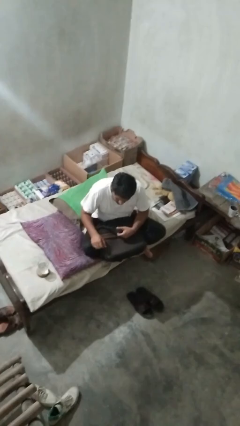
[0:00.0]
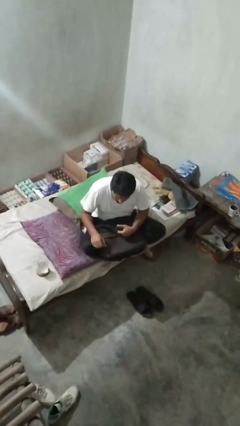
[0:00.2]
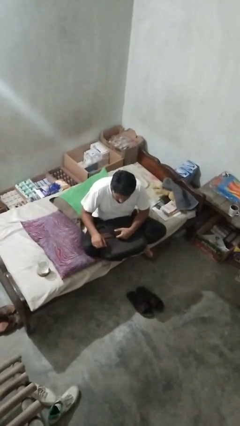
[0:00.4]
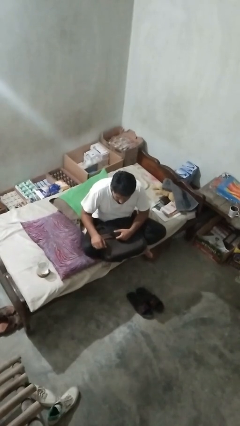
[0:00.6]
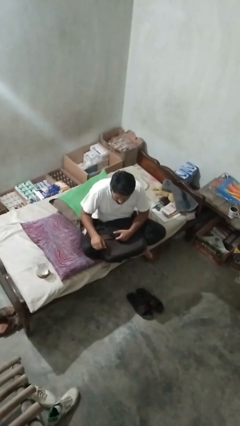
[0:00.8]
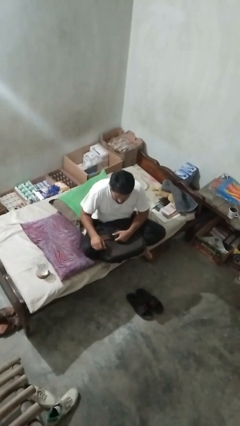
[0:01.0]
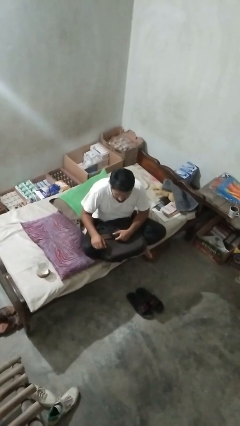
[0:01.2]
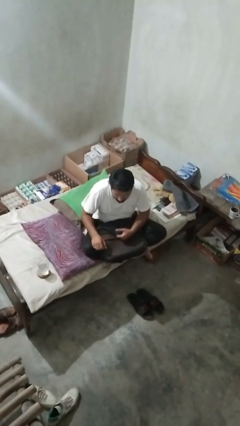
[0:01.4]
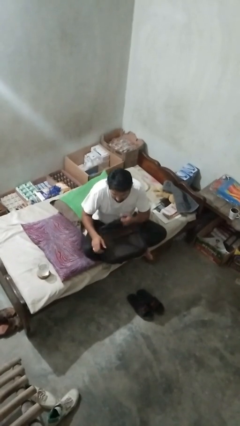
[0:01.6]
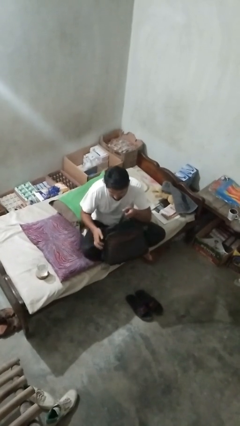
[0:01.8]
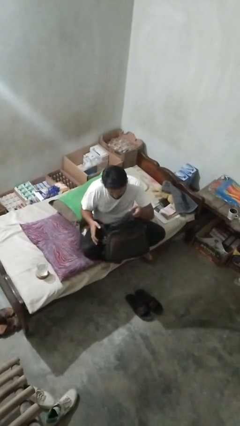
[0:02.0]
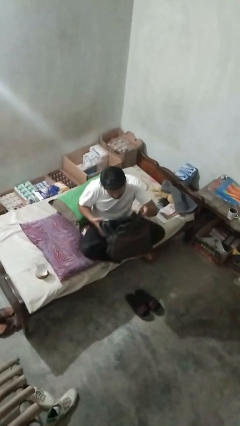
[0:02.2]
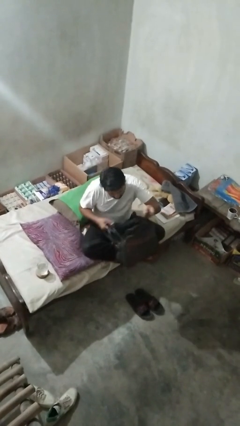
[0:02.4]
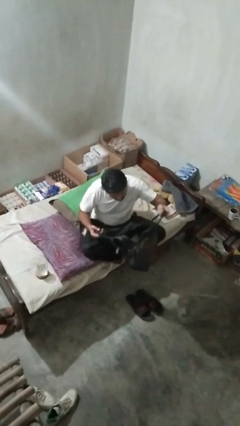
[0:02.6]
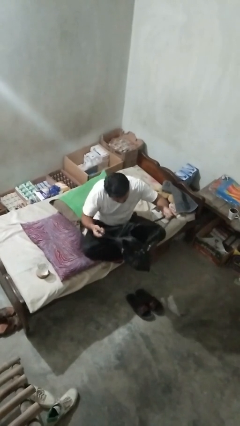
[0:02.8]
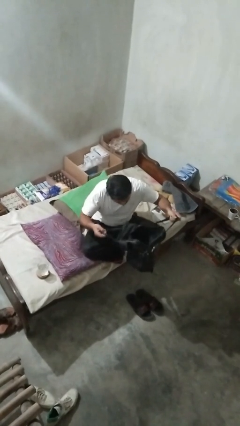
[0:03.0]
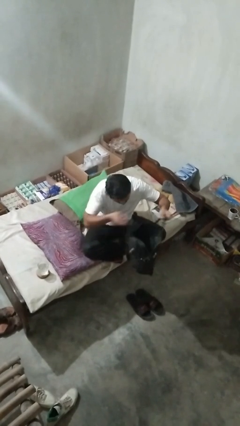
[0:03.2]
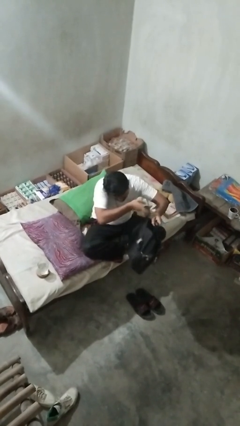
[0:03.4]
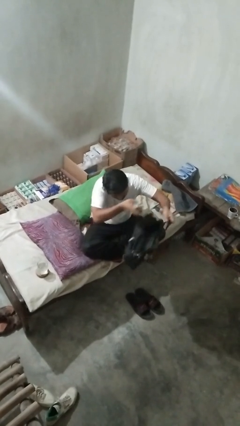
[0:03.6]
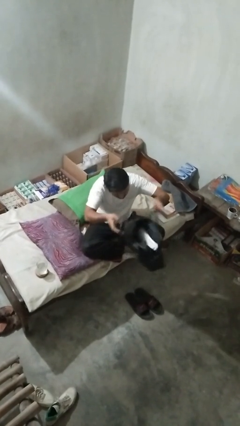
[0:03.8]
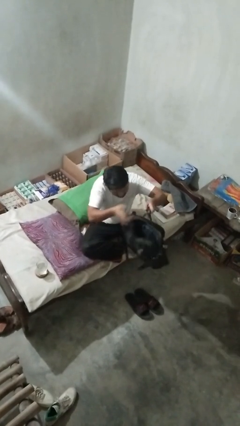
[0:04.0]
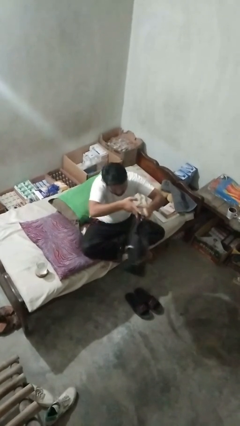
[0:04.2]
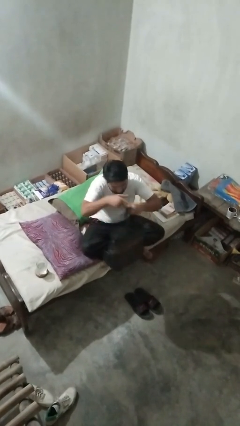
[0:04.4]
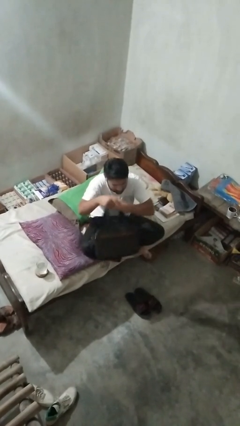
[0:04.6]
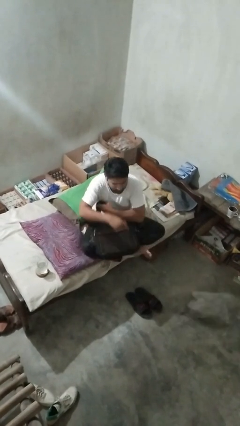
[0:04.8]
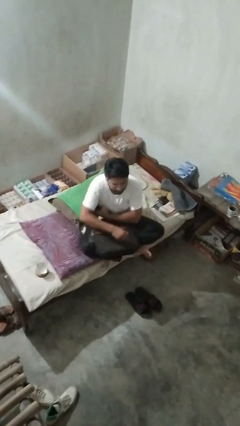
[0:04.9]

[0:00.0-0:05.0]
person searches in bag

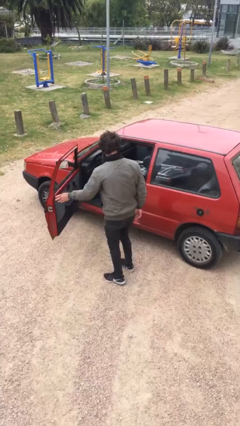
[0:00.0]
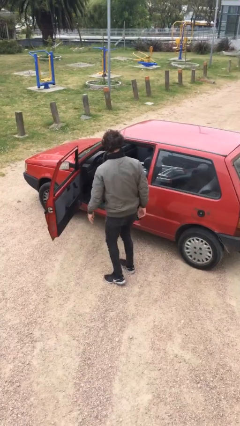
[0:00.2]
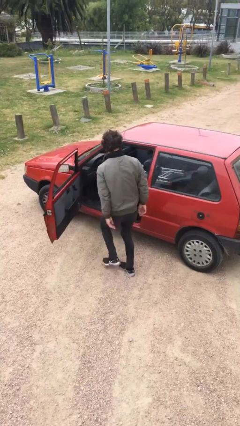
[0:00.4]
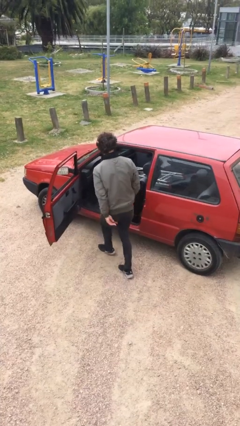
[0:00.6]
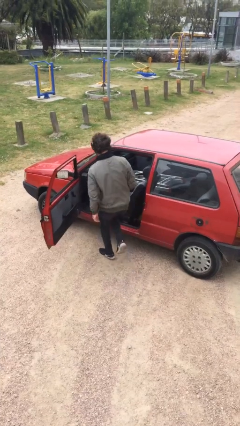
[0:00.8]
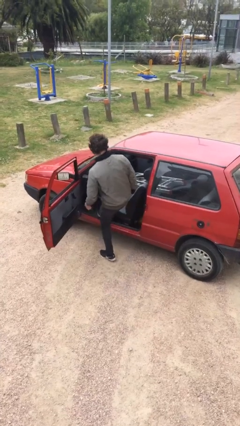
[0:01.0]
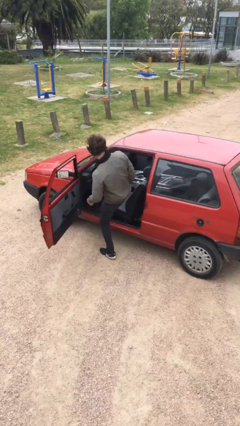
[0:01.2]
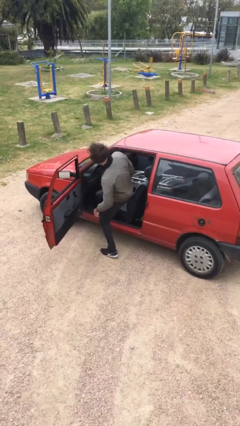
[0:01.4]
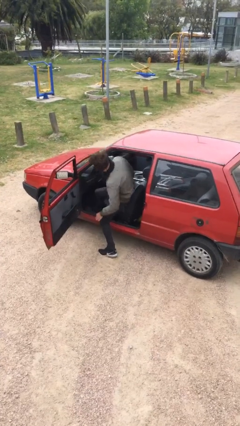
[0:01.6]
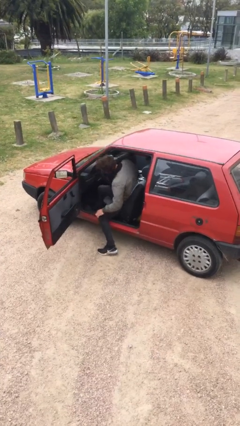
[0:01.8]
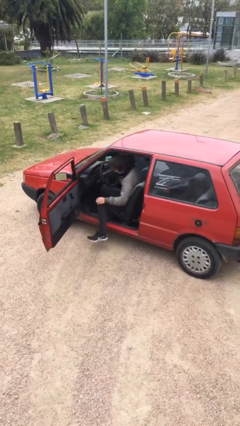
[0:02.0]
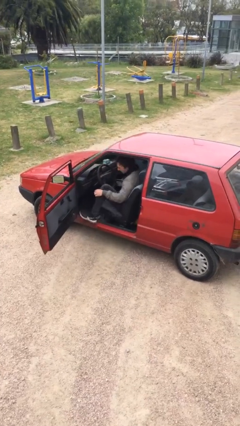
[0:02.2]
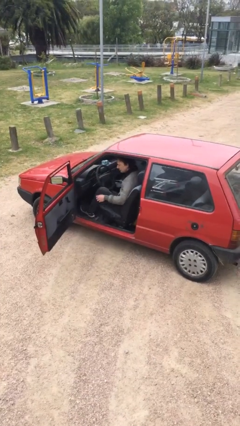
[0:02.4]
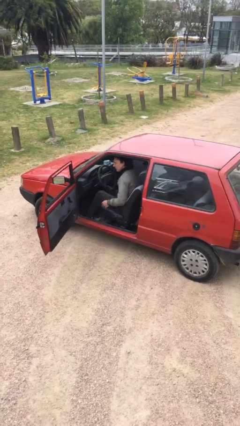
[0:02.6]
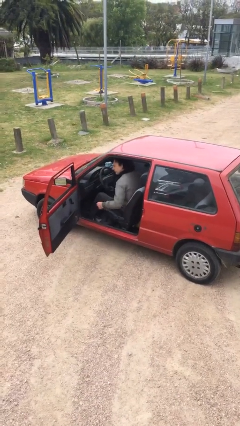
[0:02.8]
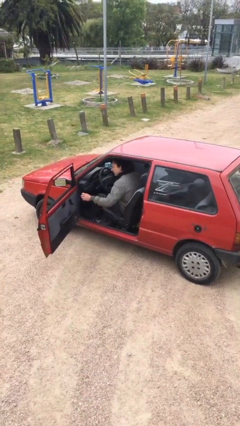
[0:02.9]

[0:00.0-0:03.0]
person enters car

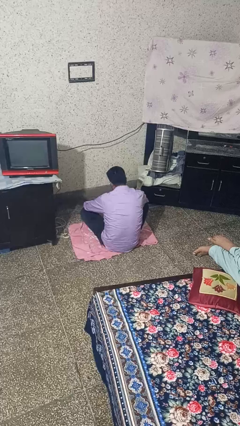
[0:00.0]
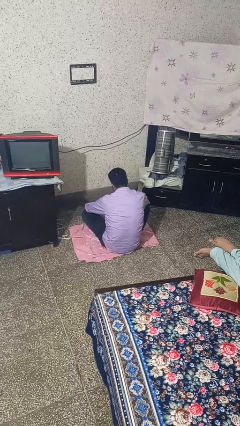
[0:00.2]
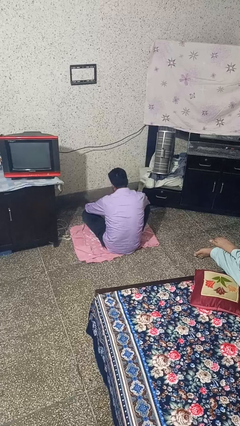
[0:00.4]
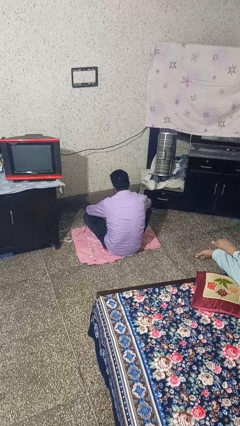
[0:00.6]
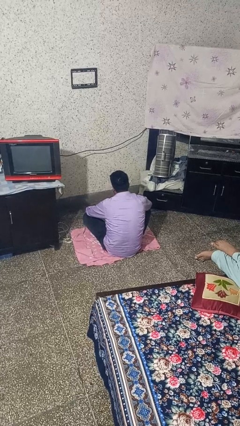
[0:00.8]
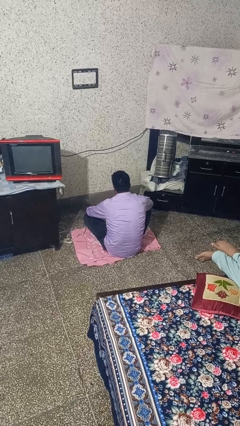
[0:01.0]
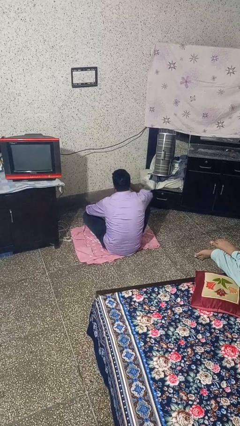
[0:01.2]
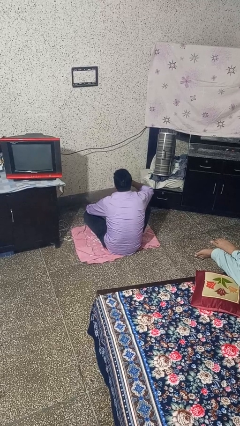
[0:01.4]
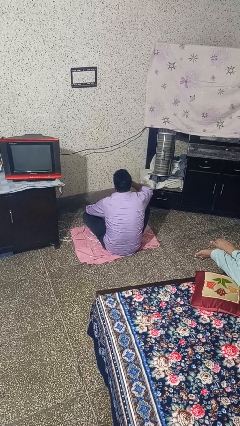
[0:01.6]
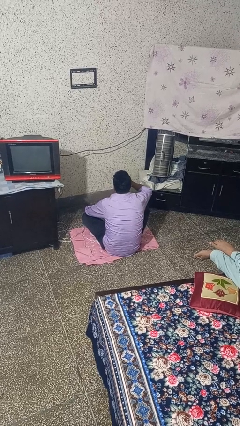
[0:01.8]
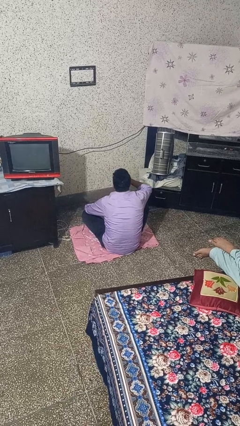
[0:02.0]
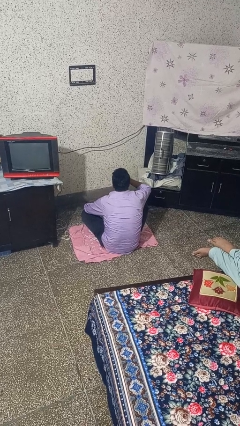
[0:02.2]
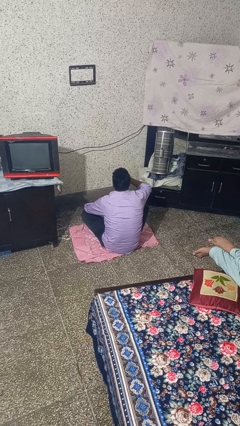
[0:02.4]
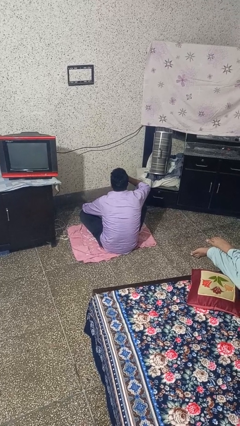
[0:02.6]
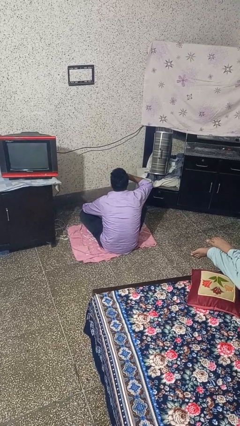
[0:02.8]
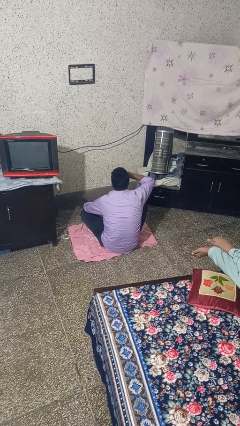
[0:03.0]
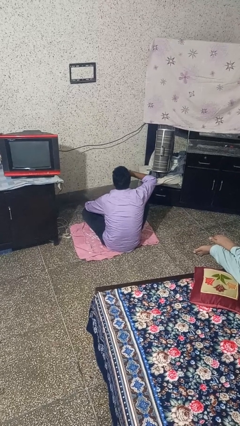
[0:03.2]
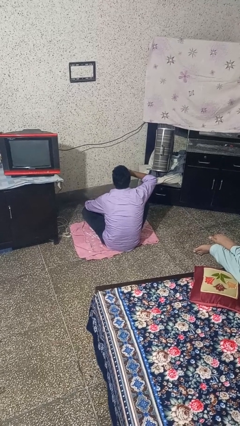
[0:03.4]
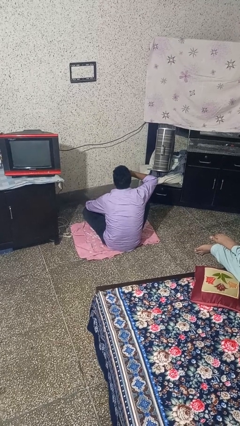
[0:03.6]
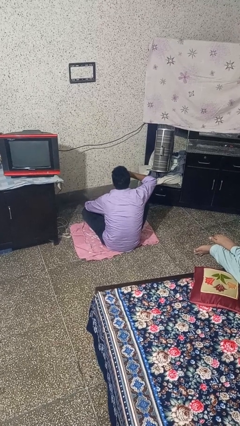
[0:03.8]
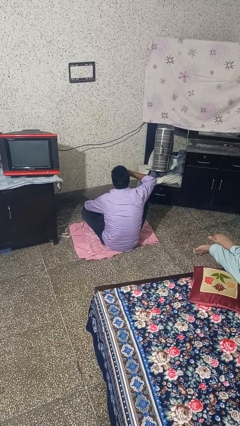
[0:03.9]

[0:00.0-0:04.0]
person yawns

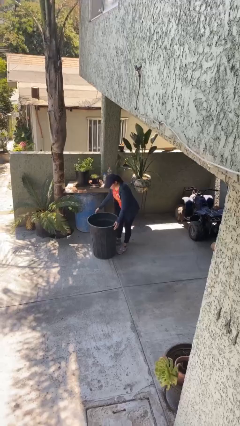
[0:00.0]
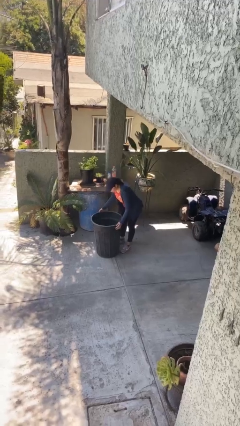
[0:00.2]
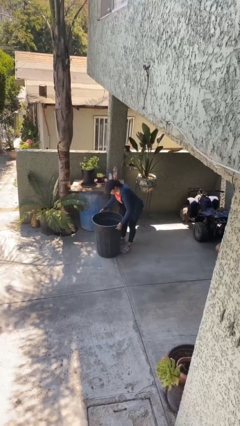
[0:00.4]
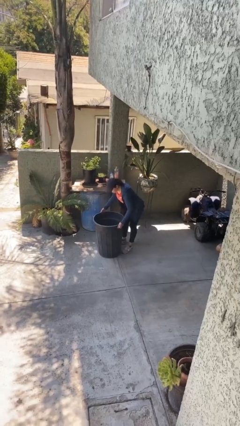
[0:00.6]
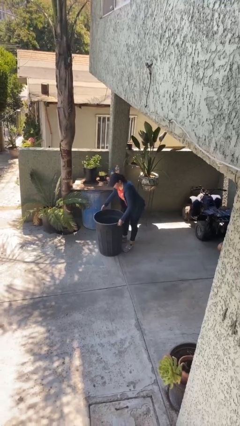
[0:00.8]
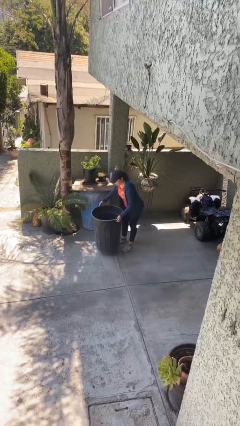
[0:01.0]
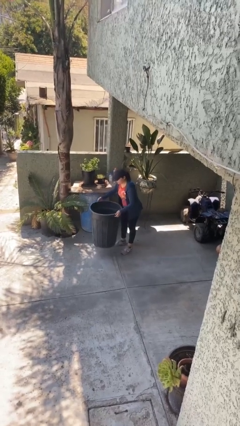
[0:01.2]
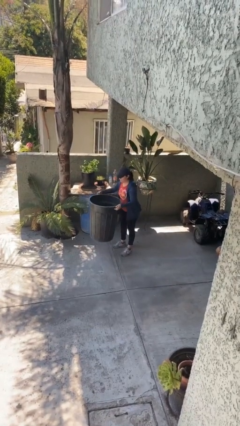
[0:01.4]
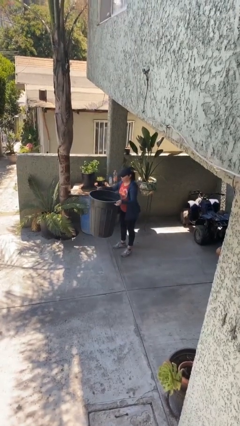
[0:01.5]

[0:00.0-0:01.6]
person picks up object from floor

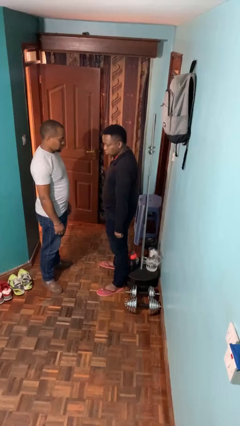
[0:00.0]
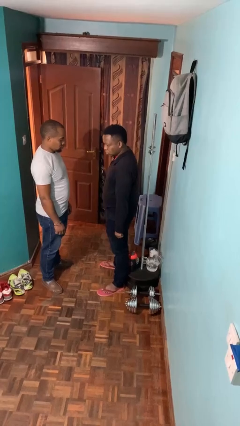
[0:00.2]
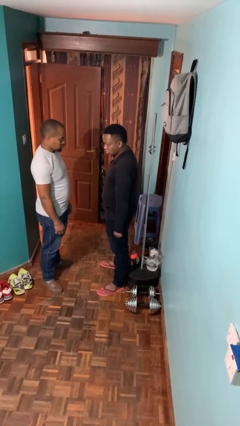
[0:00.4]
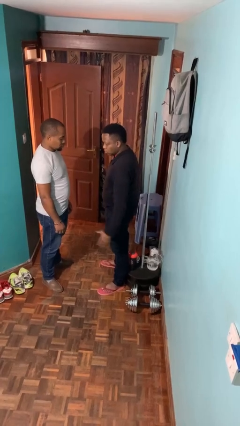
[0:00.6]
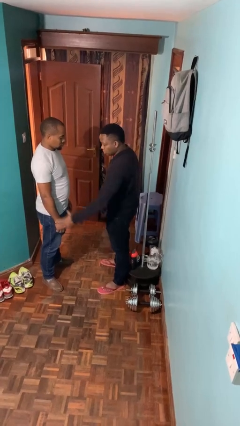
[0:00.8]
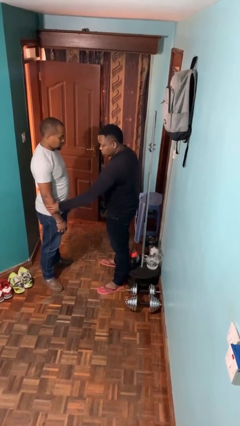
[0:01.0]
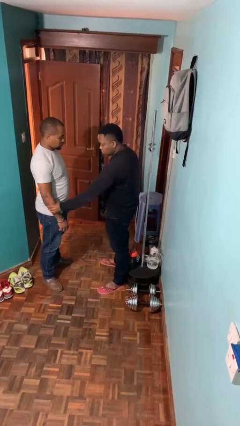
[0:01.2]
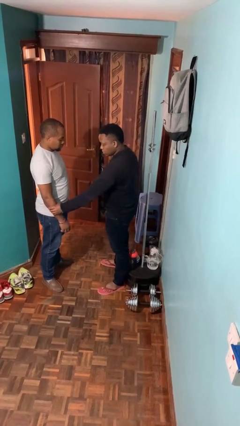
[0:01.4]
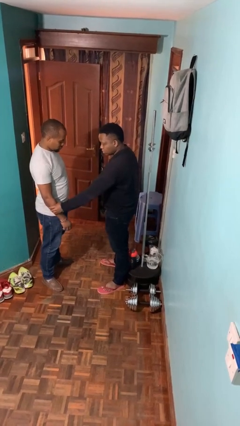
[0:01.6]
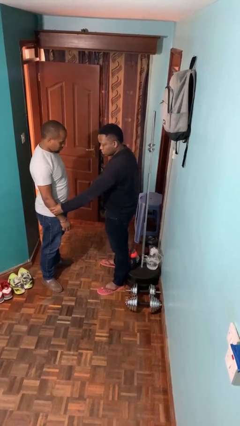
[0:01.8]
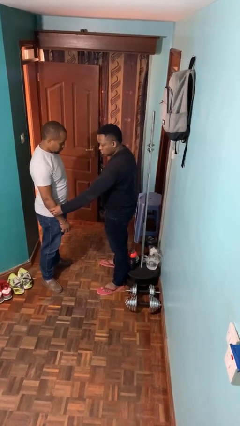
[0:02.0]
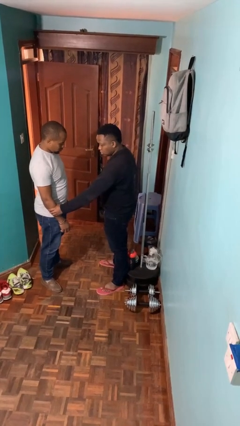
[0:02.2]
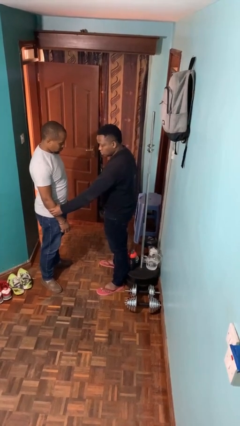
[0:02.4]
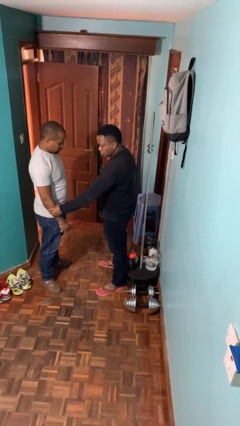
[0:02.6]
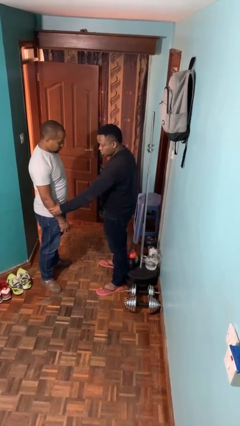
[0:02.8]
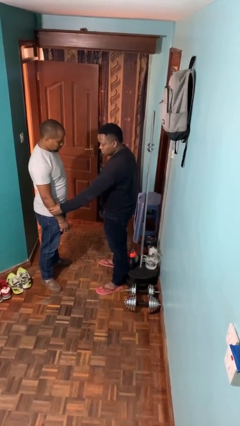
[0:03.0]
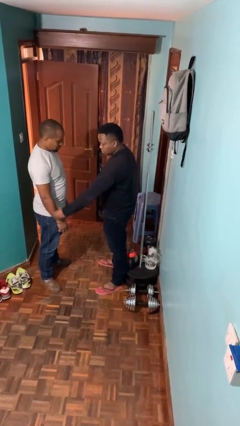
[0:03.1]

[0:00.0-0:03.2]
person grabs person by forearm

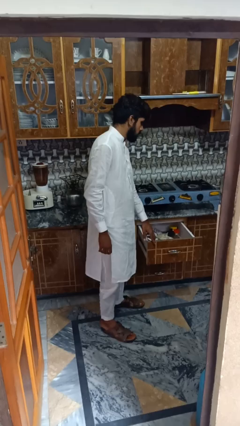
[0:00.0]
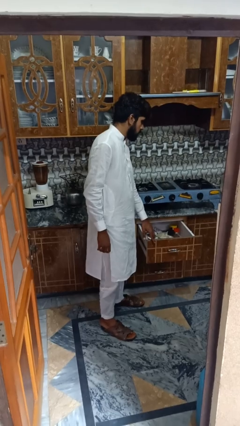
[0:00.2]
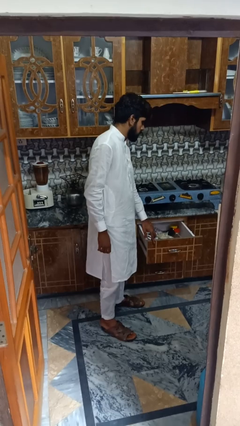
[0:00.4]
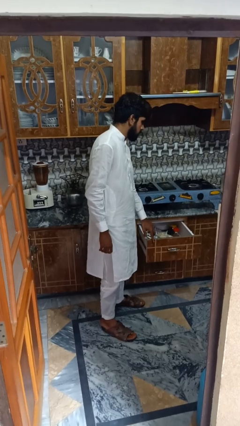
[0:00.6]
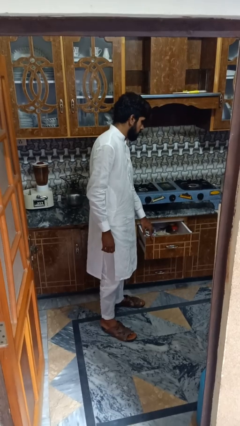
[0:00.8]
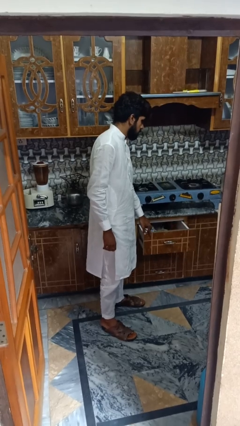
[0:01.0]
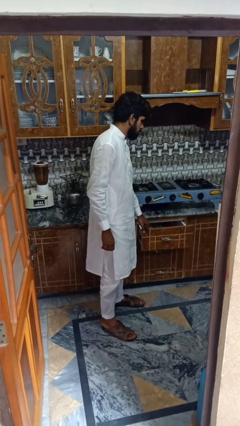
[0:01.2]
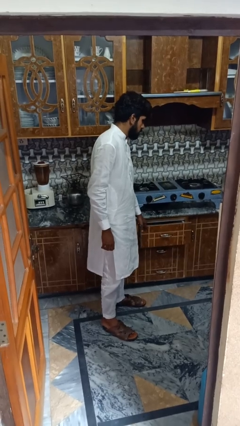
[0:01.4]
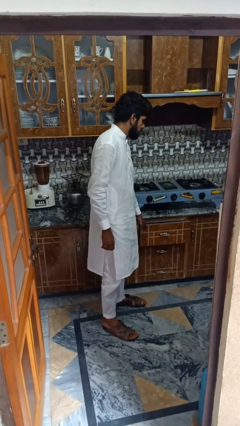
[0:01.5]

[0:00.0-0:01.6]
person closes kitchen drawer
